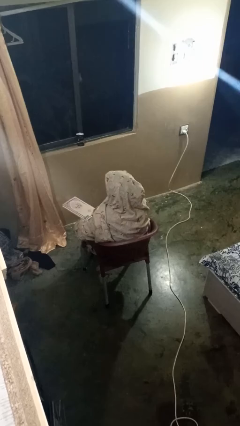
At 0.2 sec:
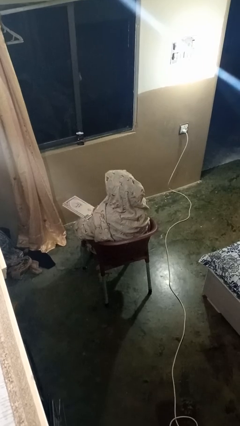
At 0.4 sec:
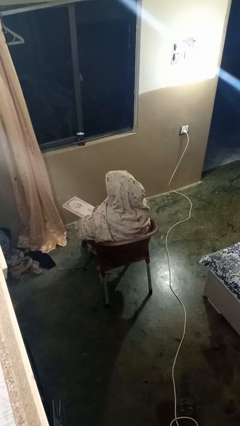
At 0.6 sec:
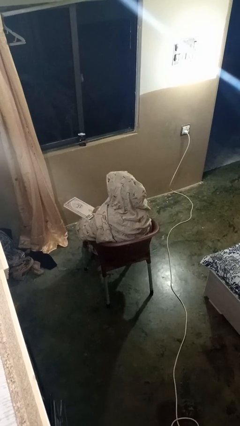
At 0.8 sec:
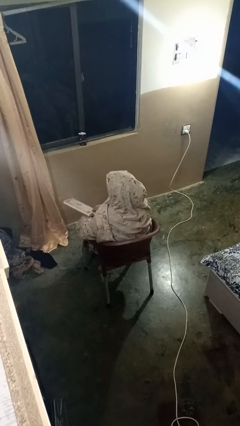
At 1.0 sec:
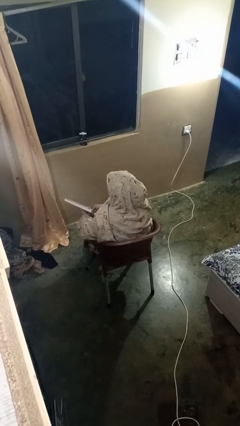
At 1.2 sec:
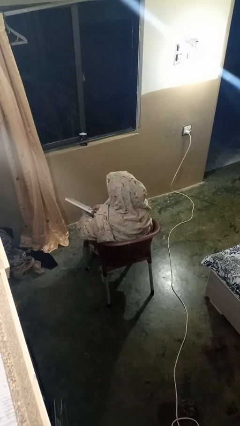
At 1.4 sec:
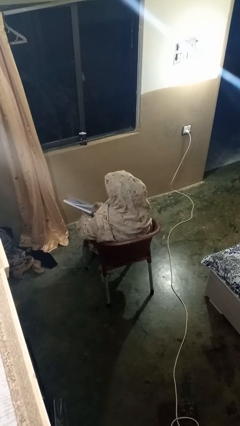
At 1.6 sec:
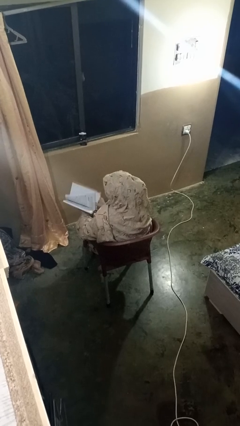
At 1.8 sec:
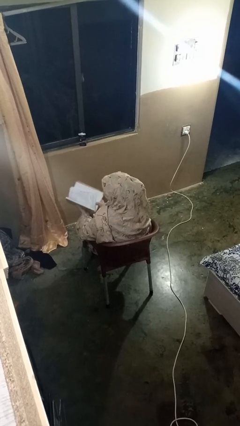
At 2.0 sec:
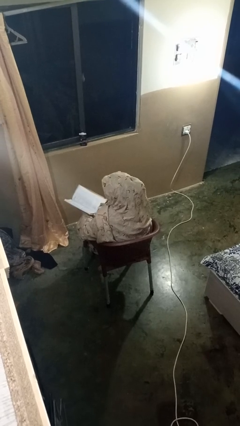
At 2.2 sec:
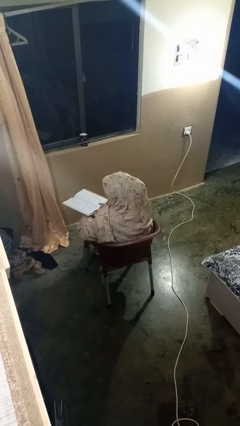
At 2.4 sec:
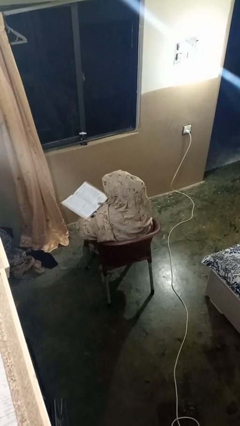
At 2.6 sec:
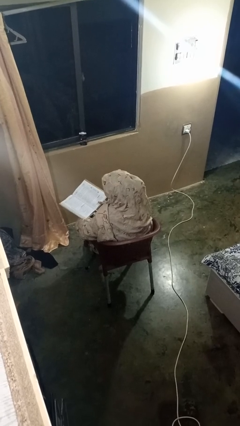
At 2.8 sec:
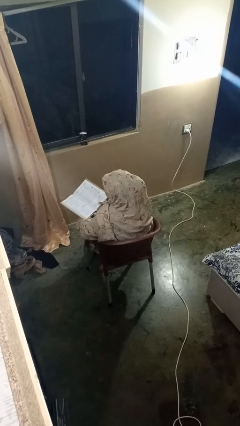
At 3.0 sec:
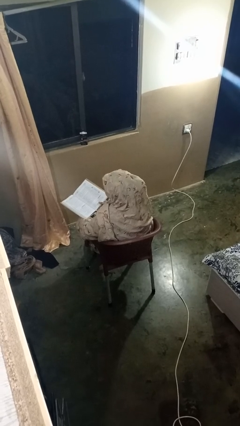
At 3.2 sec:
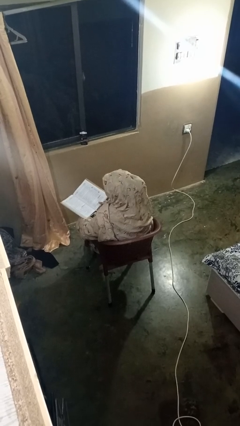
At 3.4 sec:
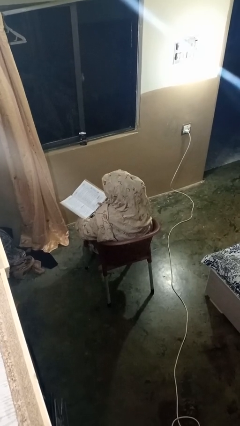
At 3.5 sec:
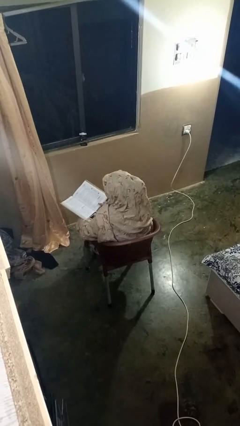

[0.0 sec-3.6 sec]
person reads book

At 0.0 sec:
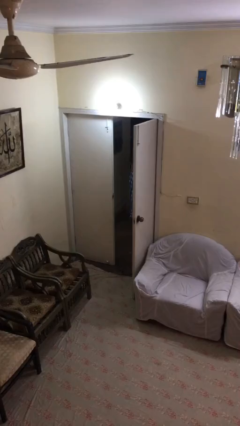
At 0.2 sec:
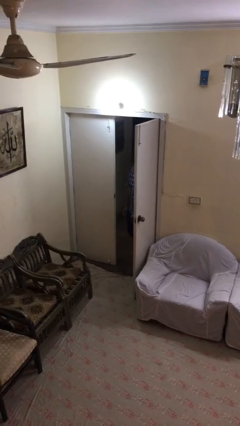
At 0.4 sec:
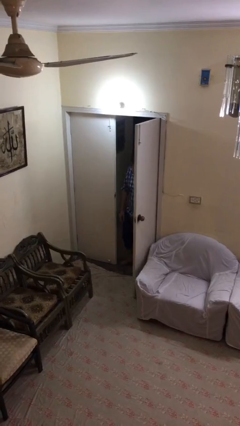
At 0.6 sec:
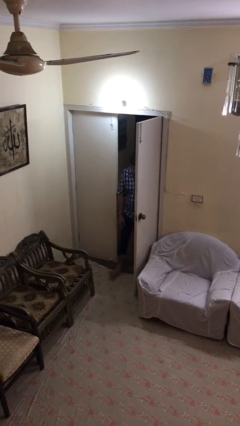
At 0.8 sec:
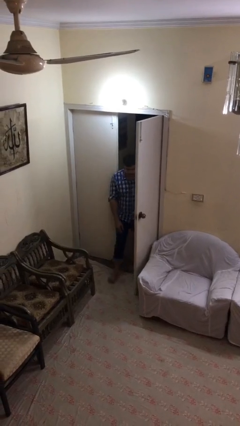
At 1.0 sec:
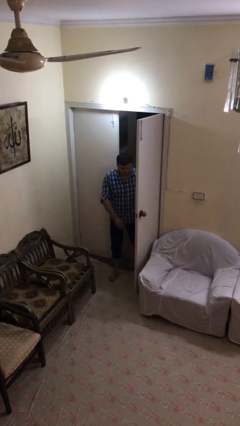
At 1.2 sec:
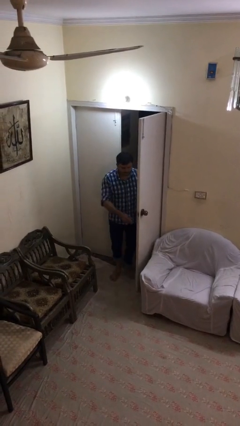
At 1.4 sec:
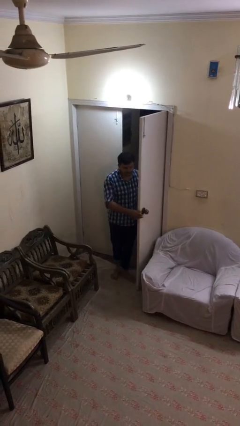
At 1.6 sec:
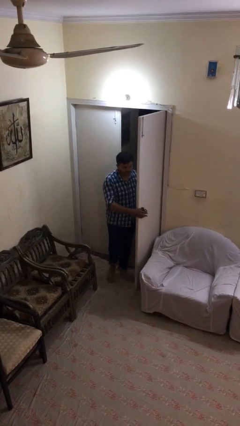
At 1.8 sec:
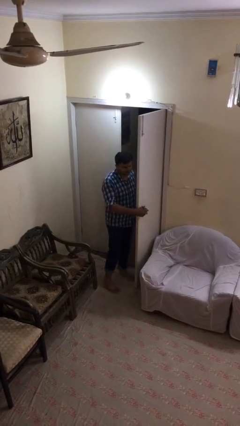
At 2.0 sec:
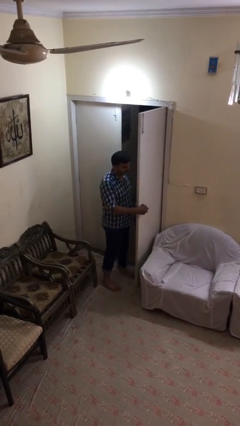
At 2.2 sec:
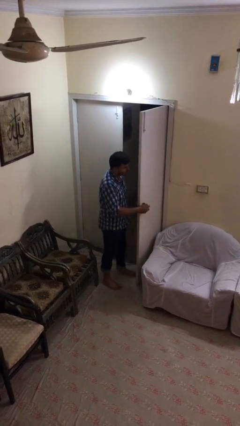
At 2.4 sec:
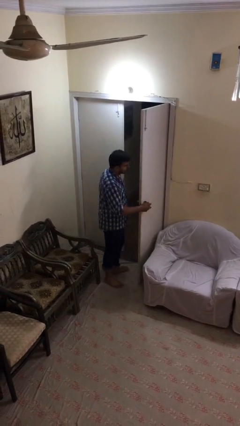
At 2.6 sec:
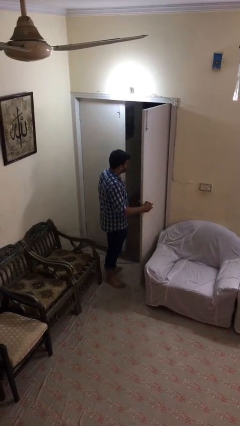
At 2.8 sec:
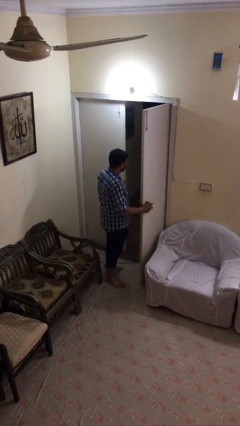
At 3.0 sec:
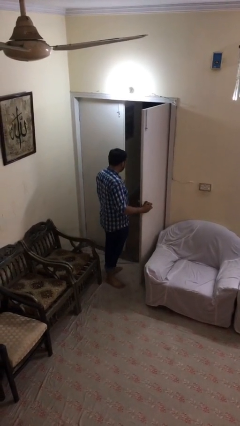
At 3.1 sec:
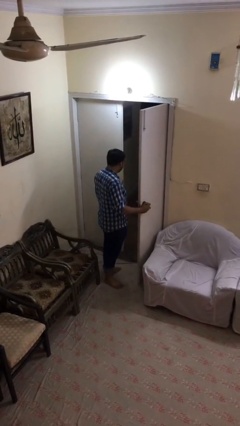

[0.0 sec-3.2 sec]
person enters scene through structure

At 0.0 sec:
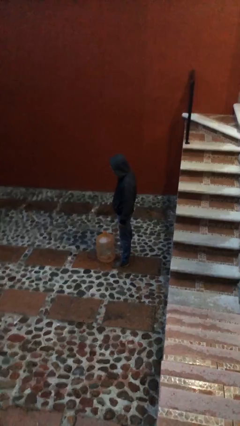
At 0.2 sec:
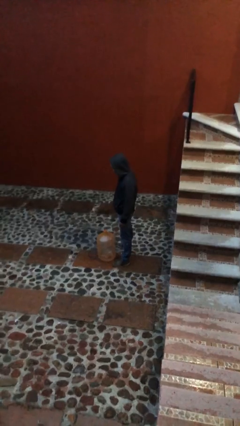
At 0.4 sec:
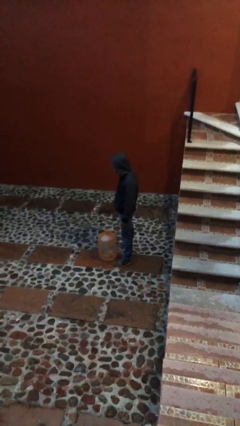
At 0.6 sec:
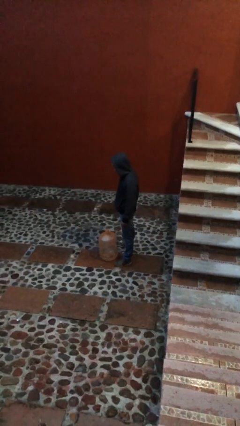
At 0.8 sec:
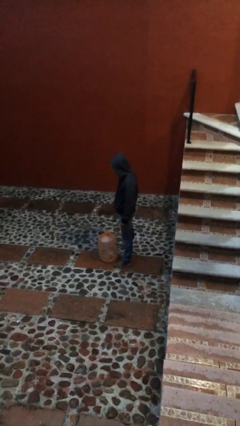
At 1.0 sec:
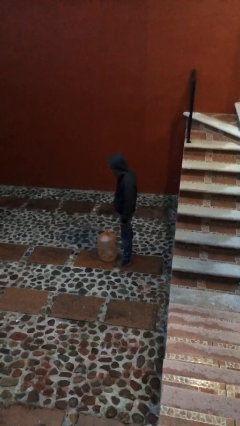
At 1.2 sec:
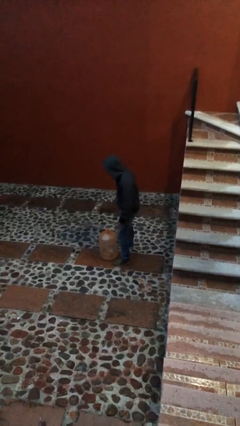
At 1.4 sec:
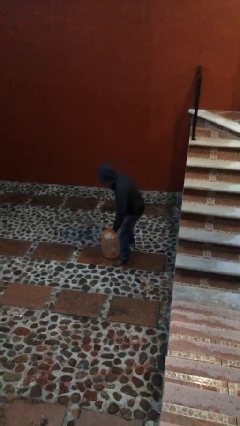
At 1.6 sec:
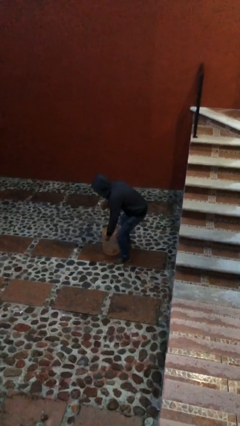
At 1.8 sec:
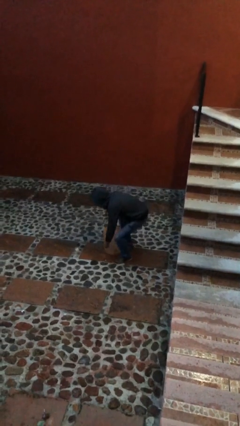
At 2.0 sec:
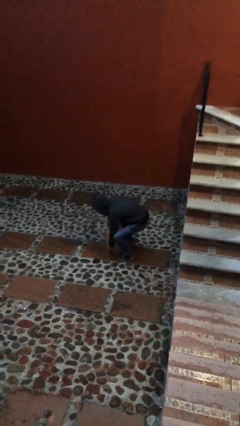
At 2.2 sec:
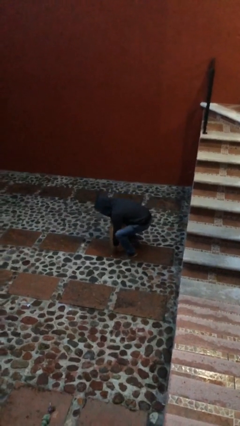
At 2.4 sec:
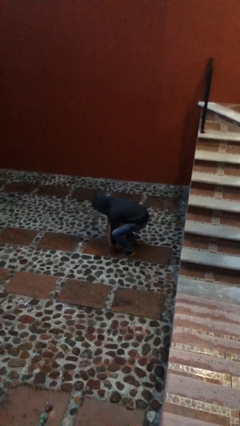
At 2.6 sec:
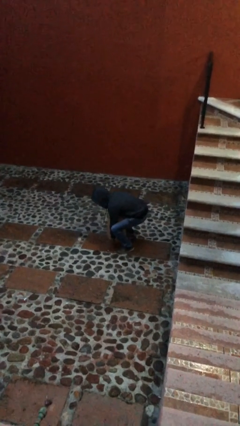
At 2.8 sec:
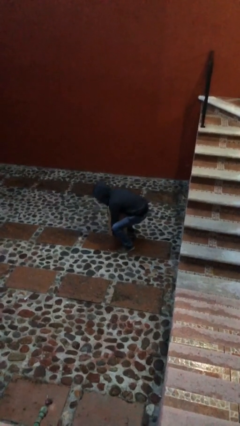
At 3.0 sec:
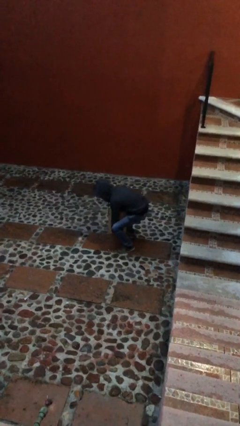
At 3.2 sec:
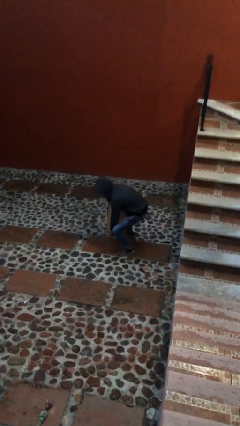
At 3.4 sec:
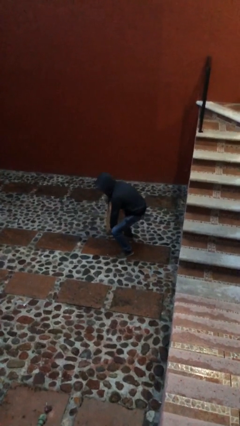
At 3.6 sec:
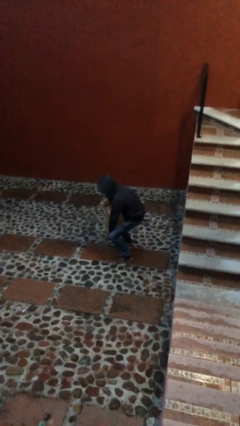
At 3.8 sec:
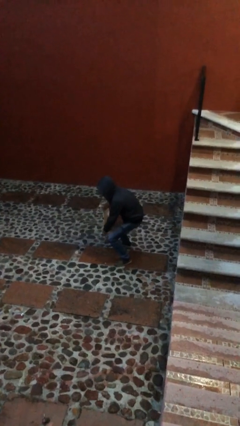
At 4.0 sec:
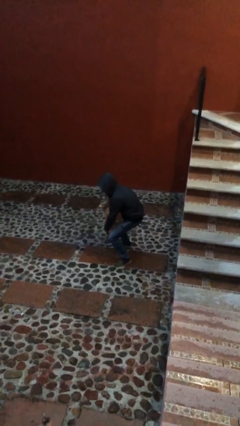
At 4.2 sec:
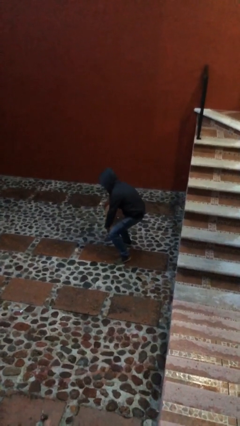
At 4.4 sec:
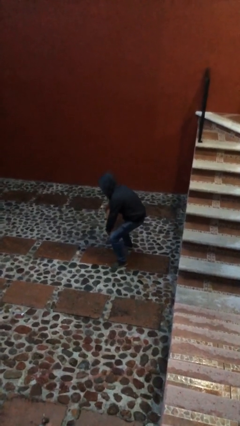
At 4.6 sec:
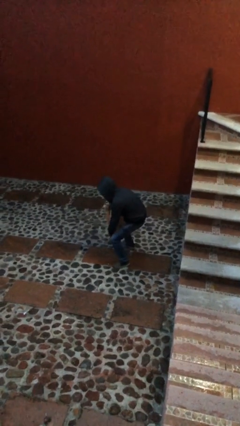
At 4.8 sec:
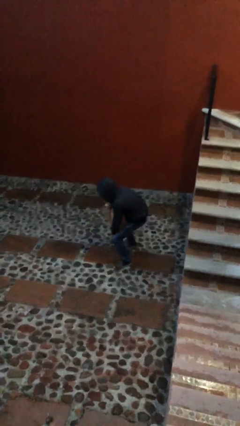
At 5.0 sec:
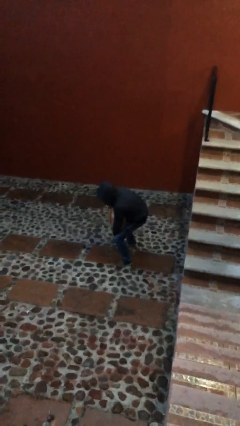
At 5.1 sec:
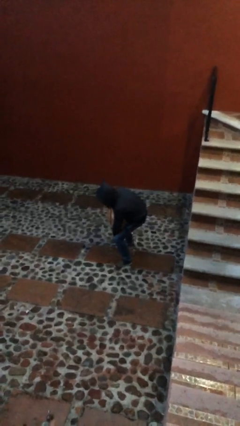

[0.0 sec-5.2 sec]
person picks up object from floor

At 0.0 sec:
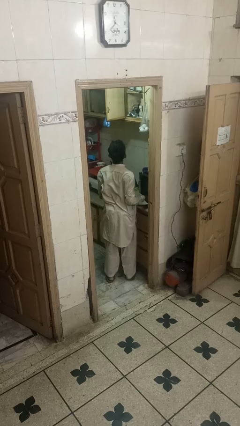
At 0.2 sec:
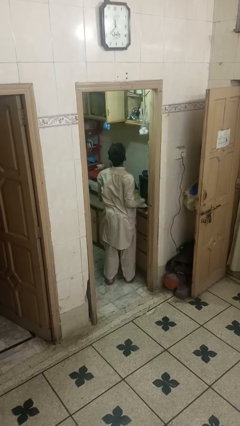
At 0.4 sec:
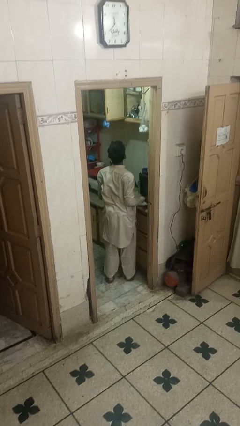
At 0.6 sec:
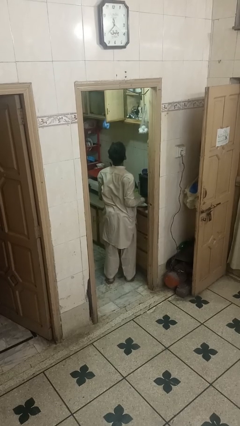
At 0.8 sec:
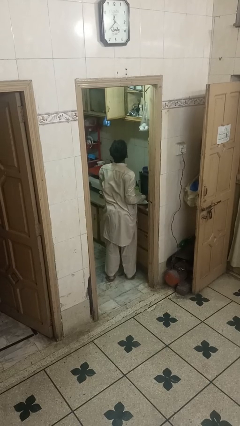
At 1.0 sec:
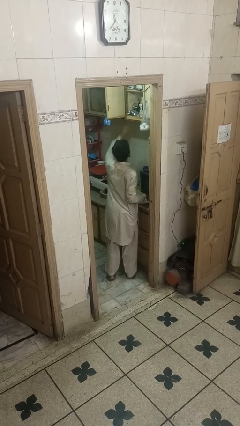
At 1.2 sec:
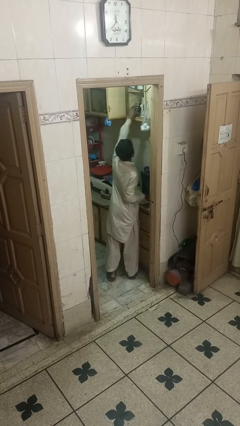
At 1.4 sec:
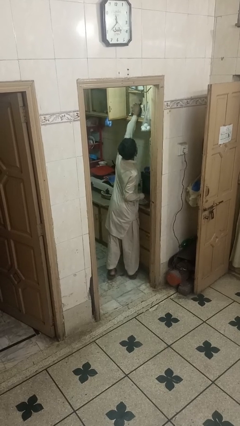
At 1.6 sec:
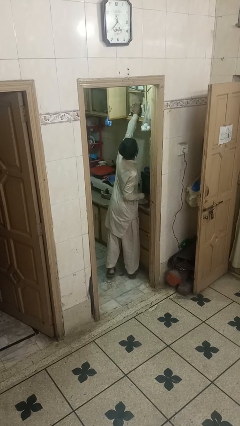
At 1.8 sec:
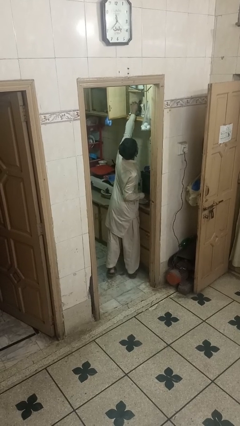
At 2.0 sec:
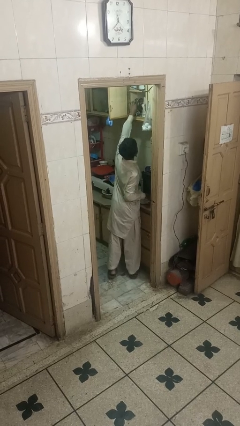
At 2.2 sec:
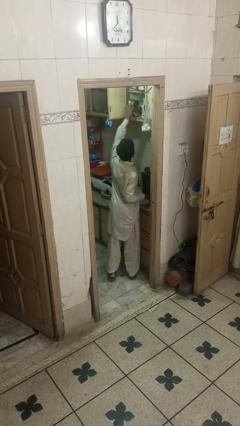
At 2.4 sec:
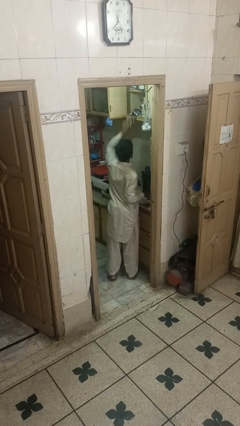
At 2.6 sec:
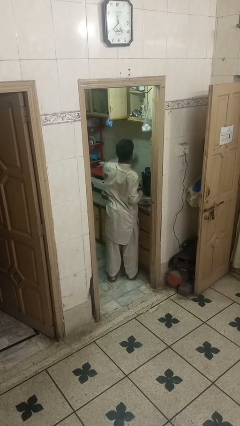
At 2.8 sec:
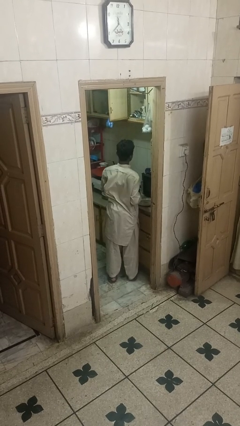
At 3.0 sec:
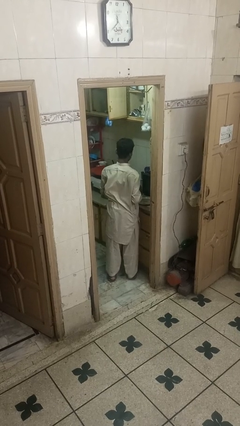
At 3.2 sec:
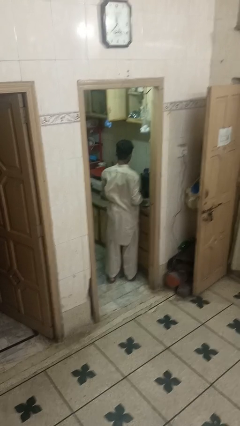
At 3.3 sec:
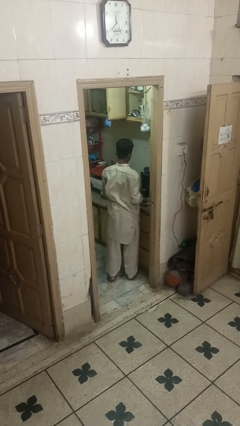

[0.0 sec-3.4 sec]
person takes object from cabinet

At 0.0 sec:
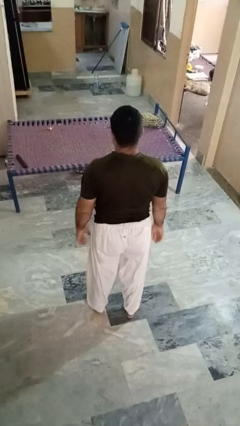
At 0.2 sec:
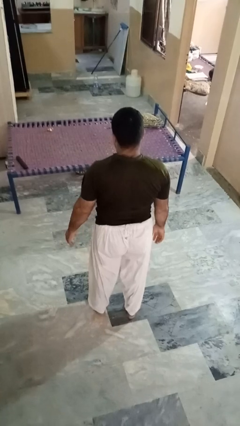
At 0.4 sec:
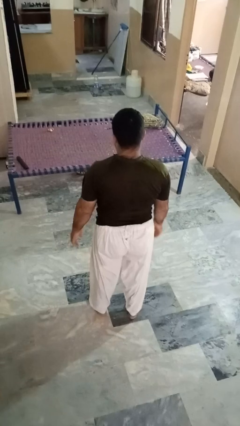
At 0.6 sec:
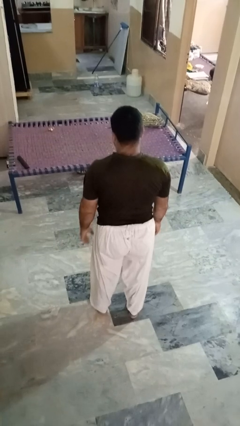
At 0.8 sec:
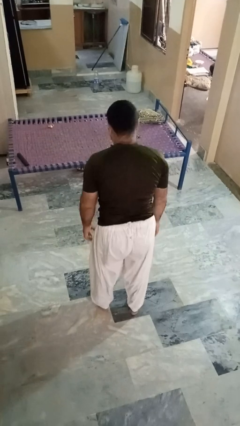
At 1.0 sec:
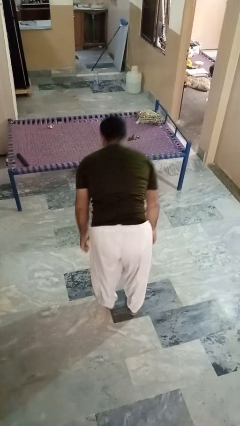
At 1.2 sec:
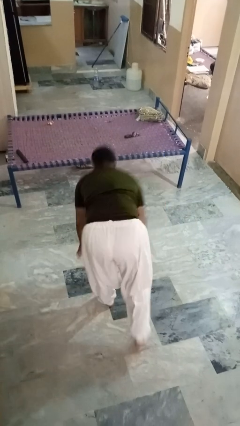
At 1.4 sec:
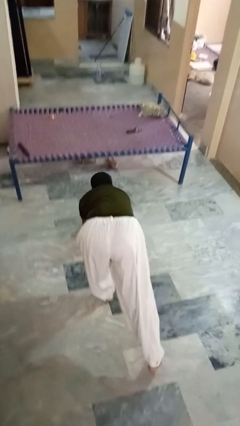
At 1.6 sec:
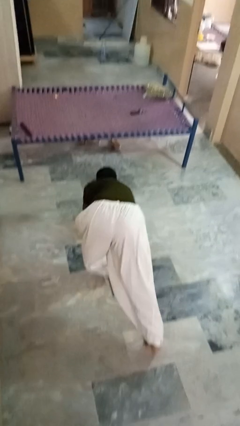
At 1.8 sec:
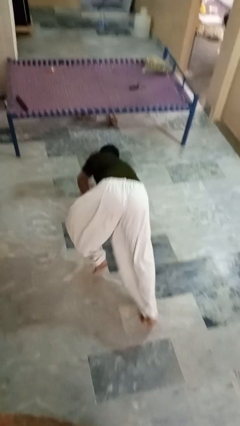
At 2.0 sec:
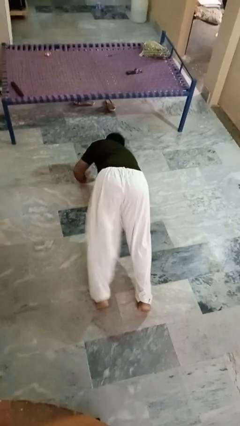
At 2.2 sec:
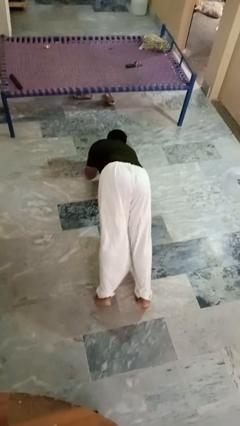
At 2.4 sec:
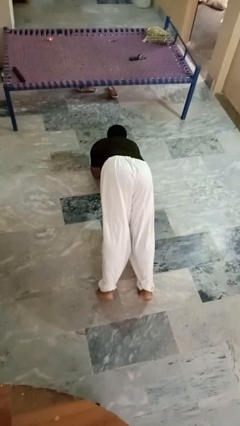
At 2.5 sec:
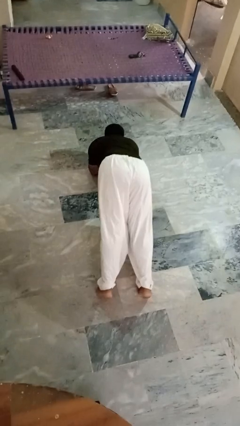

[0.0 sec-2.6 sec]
person exercises with plank
